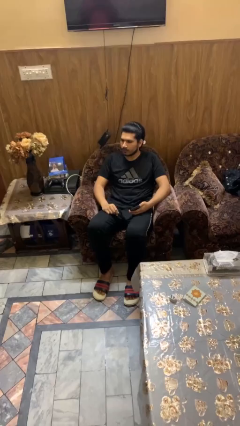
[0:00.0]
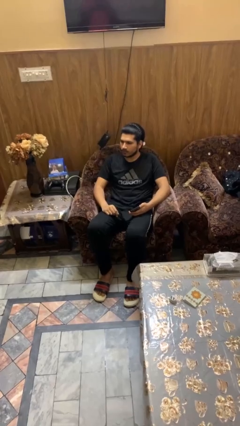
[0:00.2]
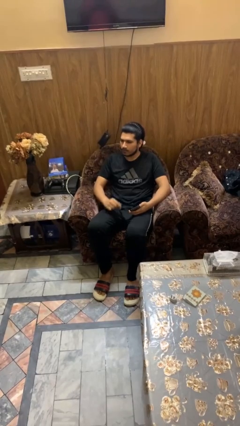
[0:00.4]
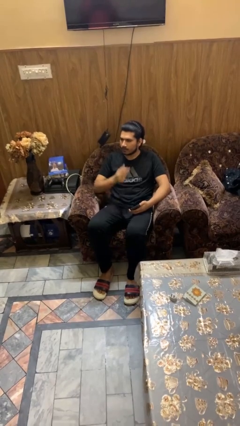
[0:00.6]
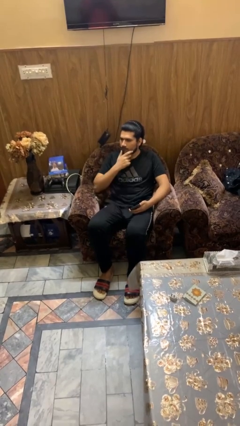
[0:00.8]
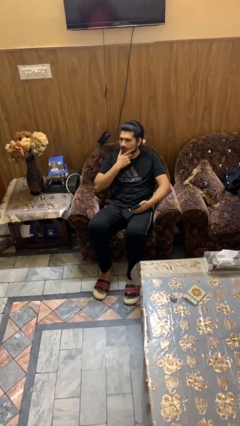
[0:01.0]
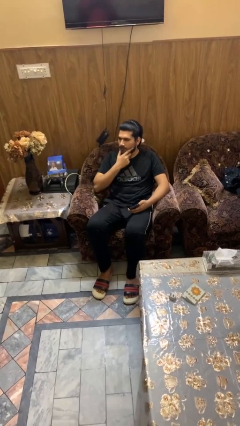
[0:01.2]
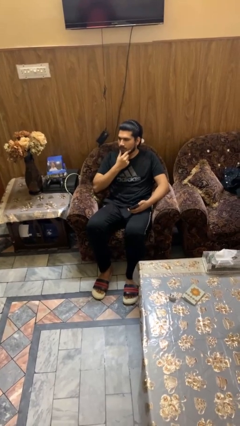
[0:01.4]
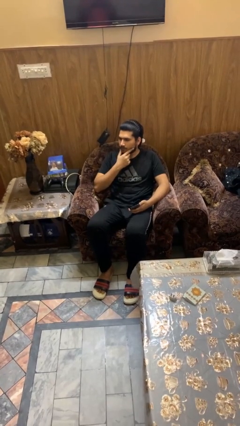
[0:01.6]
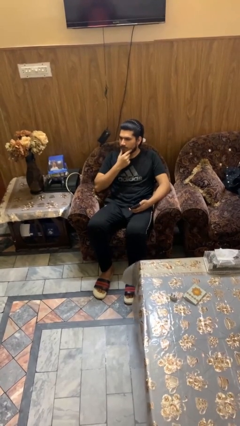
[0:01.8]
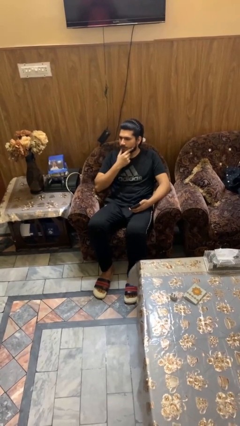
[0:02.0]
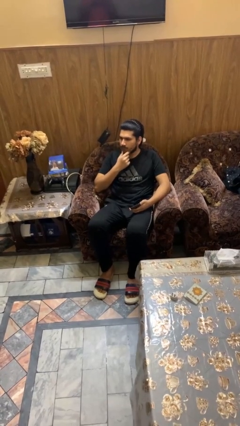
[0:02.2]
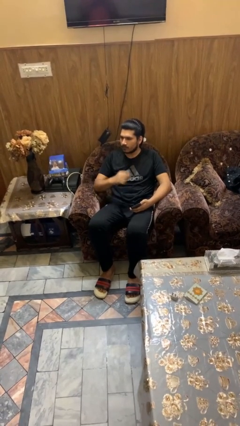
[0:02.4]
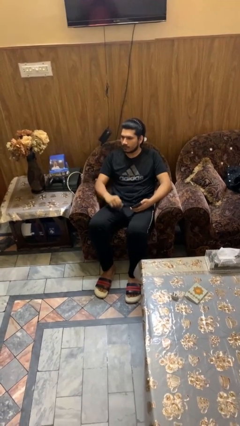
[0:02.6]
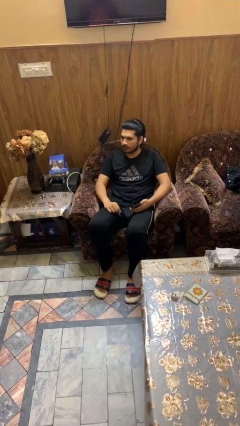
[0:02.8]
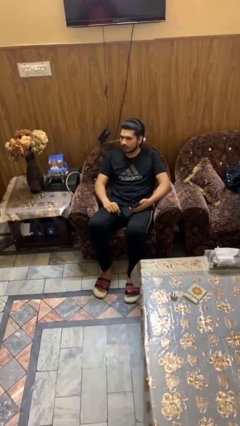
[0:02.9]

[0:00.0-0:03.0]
person strokes chin

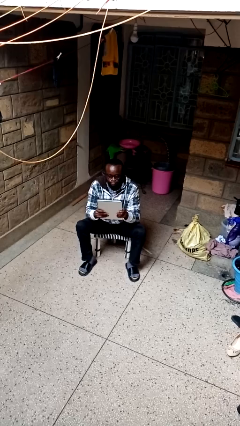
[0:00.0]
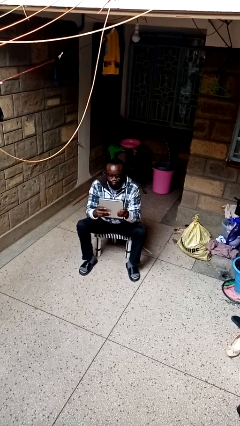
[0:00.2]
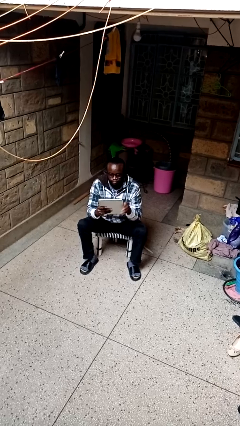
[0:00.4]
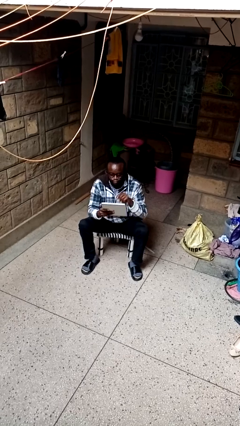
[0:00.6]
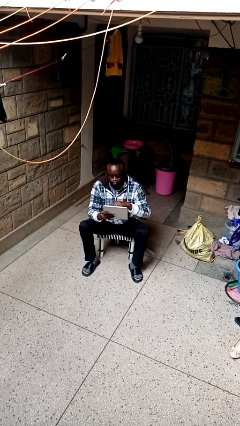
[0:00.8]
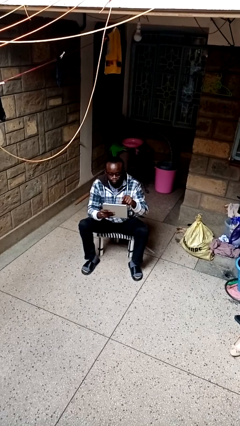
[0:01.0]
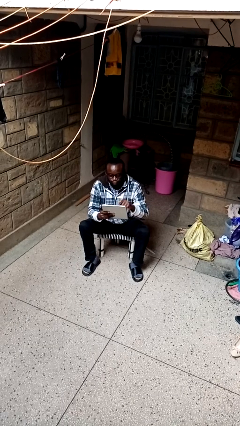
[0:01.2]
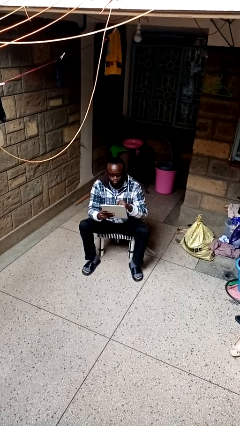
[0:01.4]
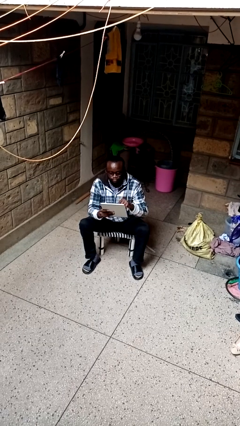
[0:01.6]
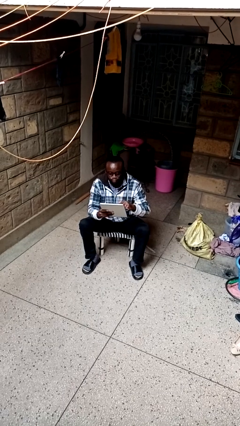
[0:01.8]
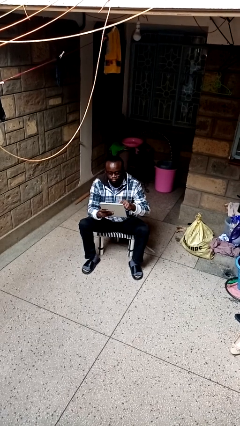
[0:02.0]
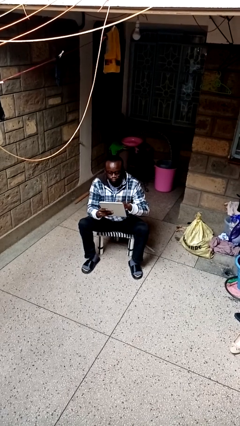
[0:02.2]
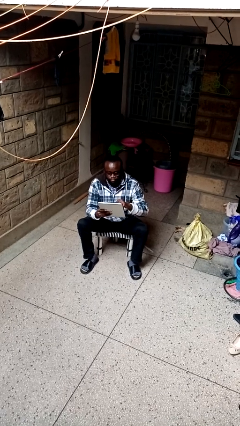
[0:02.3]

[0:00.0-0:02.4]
person interacts with tablet

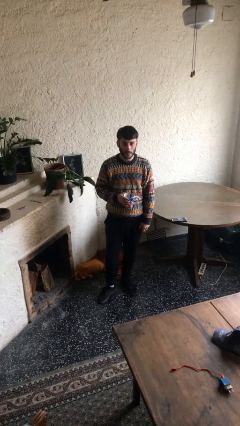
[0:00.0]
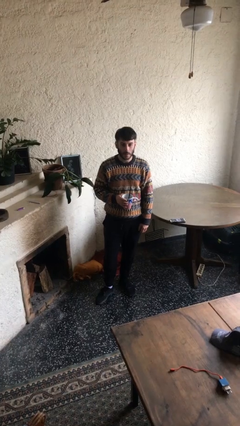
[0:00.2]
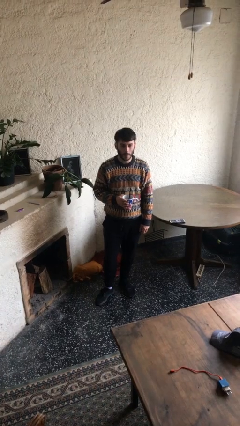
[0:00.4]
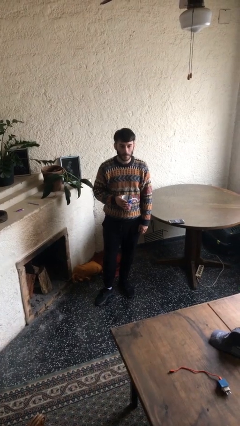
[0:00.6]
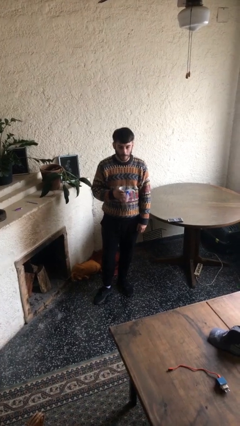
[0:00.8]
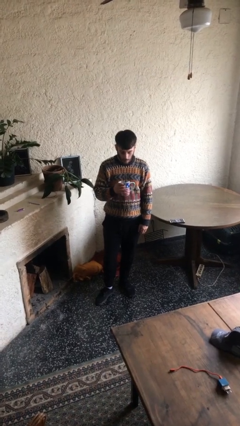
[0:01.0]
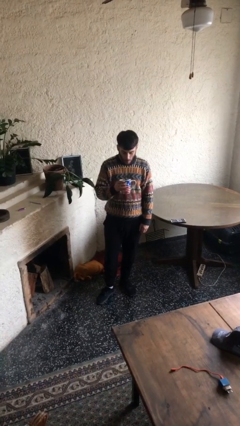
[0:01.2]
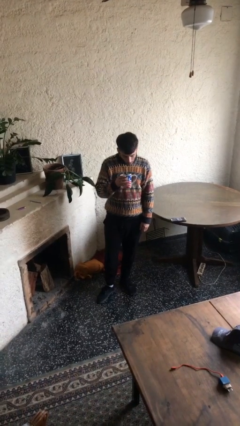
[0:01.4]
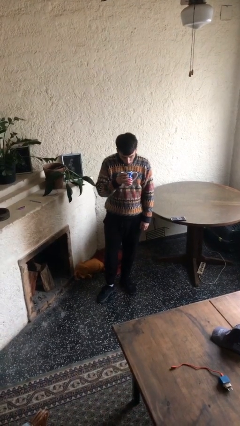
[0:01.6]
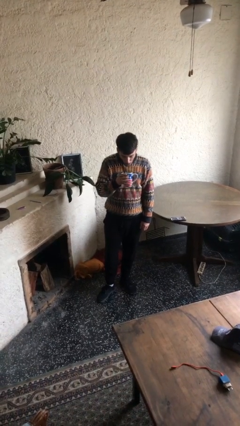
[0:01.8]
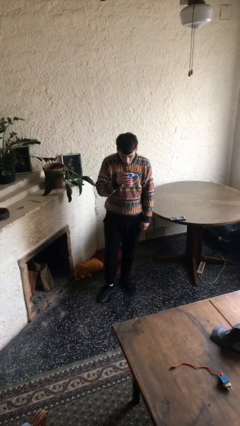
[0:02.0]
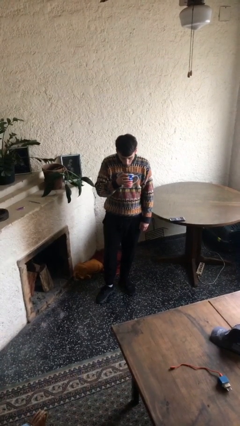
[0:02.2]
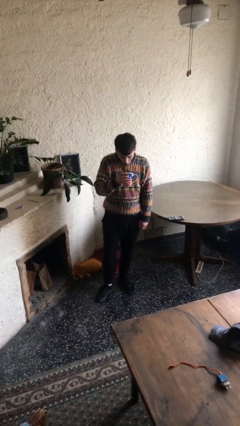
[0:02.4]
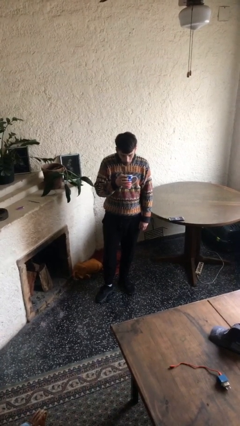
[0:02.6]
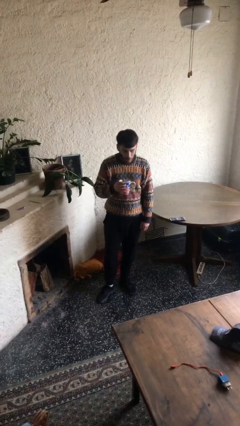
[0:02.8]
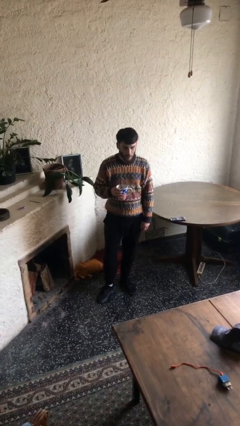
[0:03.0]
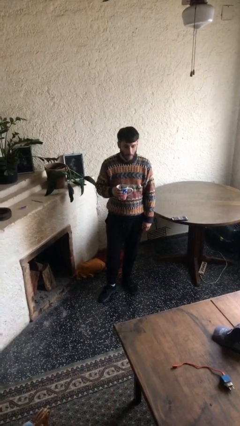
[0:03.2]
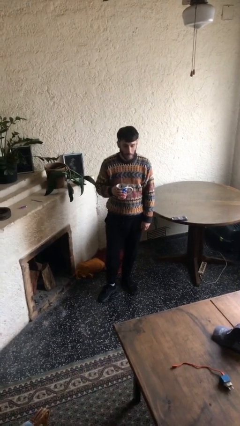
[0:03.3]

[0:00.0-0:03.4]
person drinks from straw

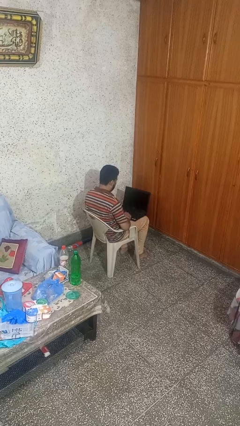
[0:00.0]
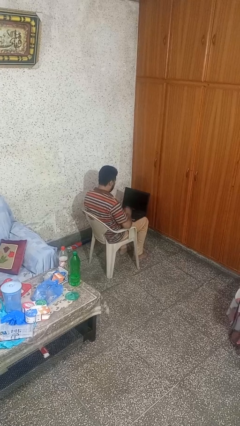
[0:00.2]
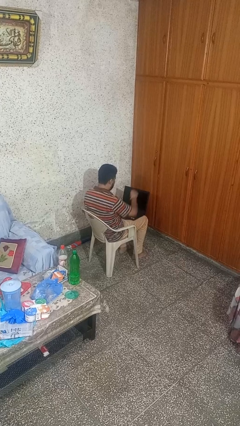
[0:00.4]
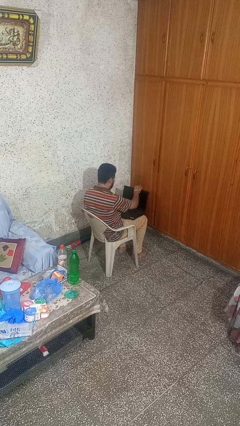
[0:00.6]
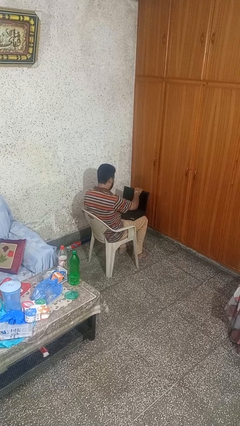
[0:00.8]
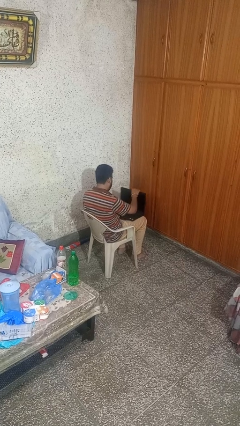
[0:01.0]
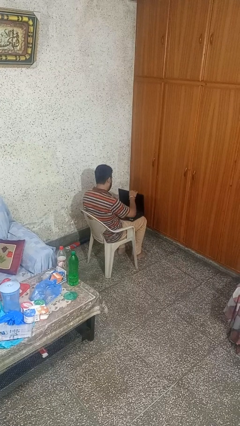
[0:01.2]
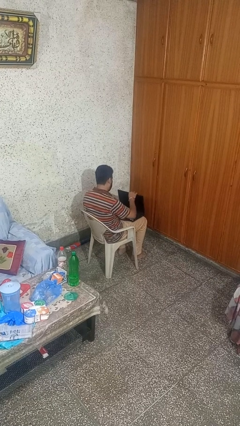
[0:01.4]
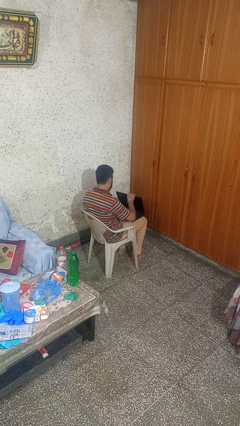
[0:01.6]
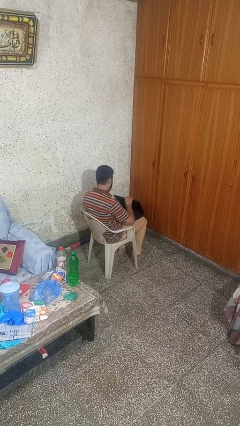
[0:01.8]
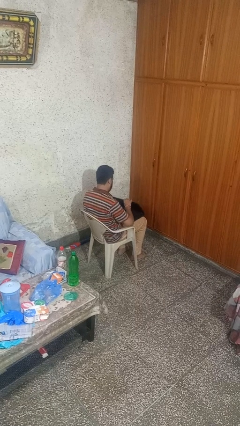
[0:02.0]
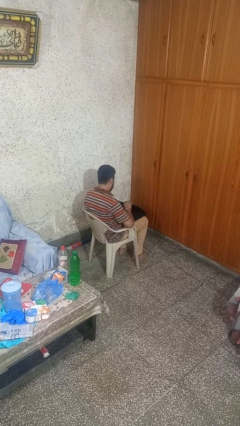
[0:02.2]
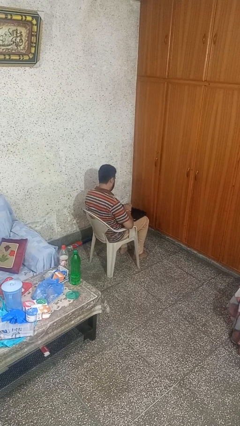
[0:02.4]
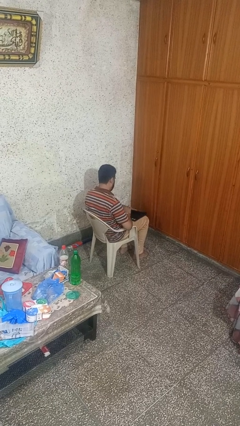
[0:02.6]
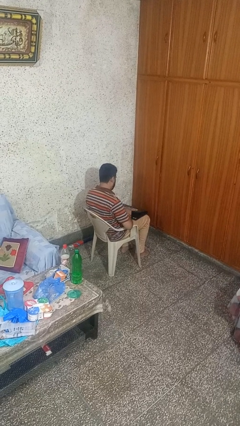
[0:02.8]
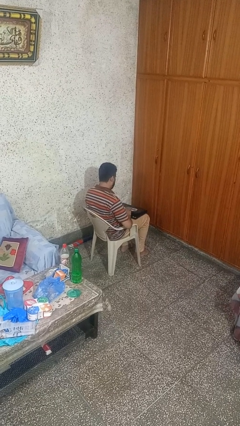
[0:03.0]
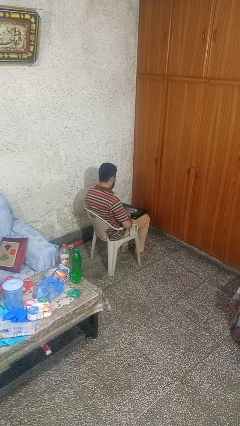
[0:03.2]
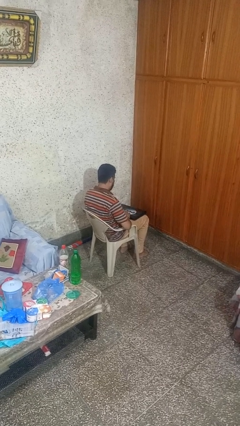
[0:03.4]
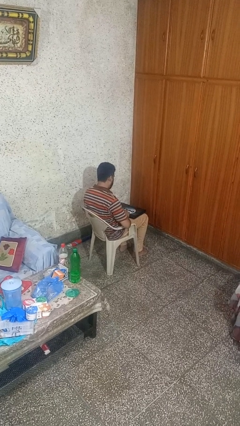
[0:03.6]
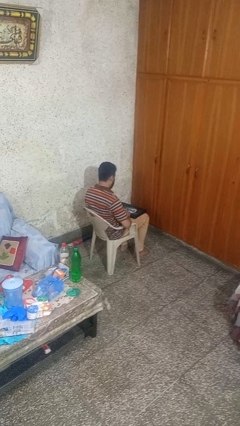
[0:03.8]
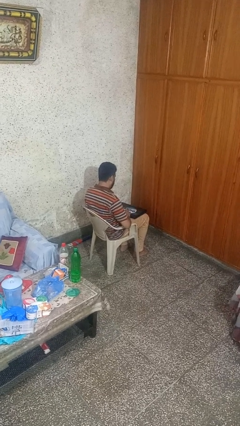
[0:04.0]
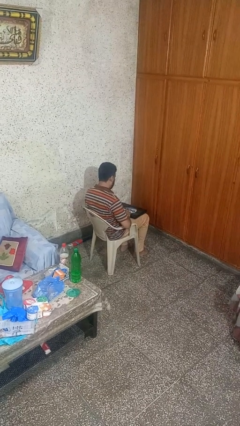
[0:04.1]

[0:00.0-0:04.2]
person closes laptop

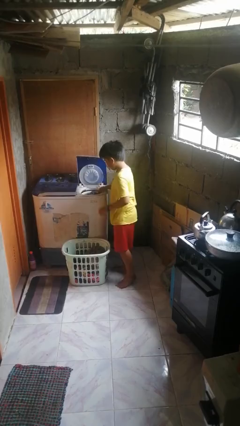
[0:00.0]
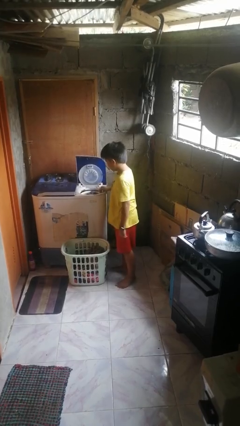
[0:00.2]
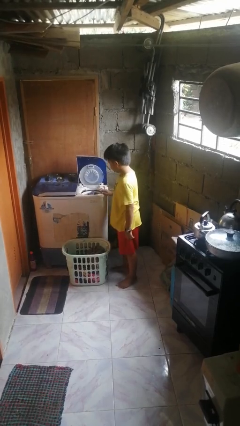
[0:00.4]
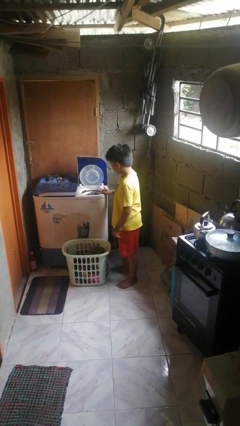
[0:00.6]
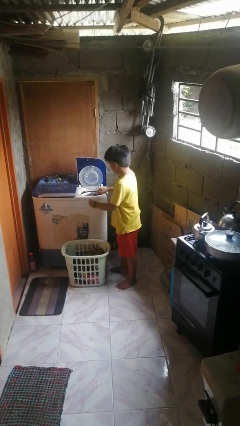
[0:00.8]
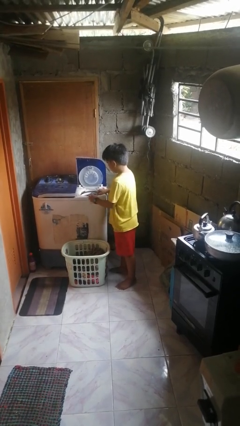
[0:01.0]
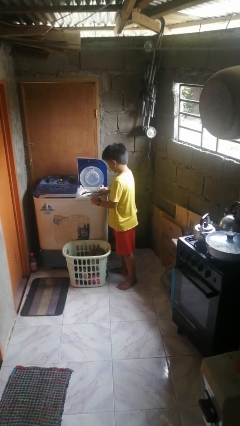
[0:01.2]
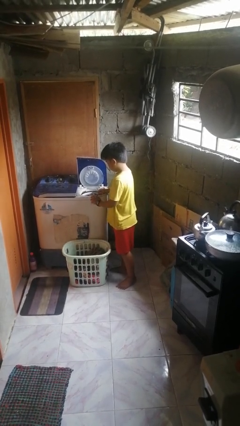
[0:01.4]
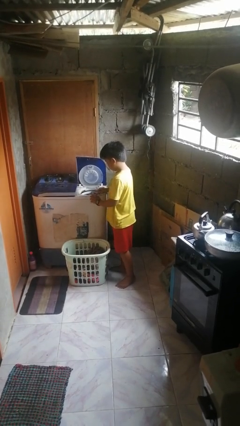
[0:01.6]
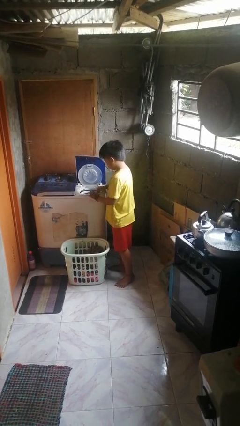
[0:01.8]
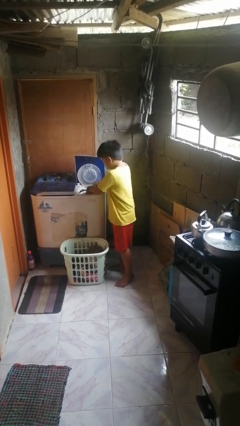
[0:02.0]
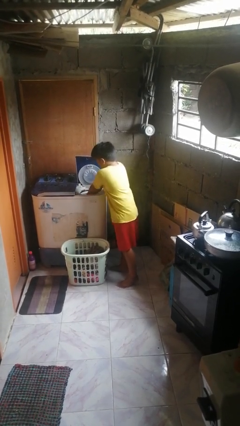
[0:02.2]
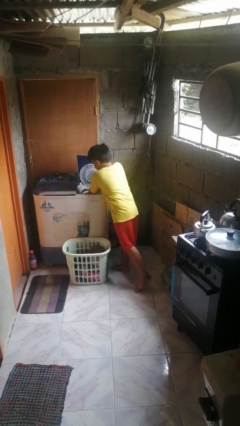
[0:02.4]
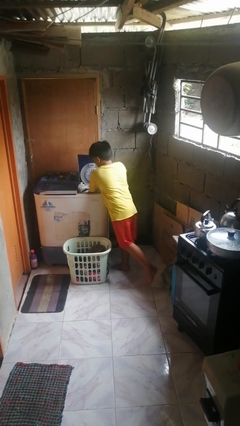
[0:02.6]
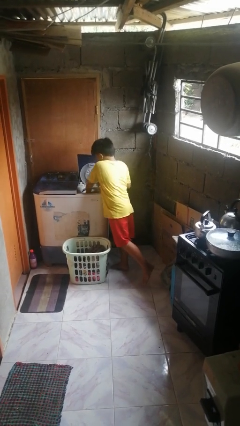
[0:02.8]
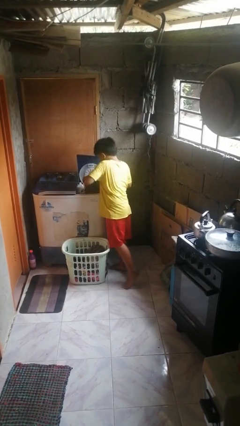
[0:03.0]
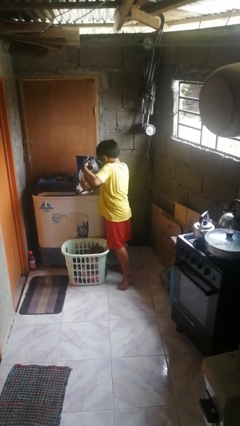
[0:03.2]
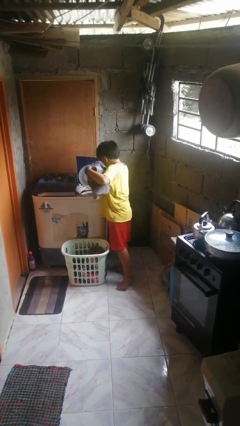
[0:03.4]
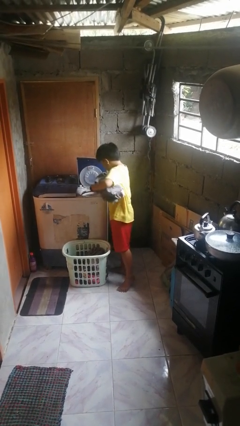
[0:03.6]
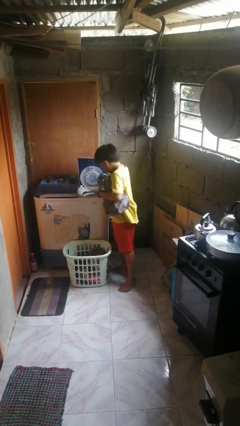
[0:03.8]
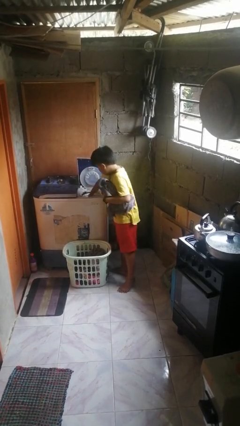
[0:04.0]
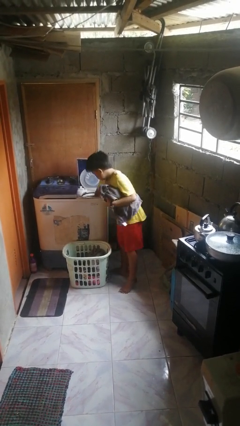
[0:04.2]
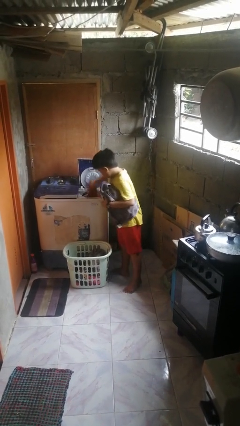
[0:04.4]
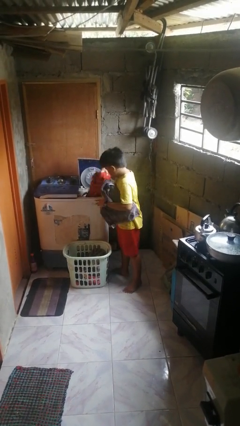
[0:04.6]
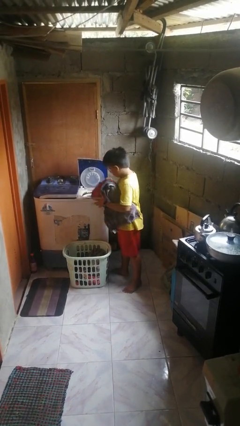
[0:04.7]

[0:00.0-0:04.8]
person unloads dryer
